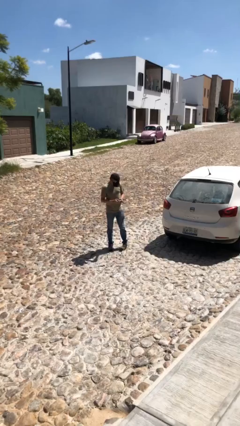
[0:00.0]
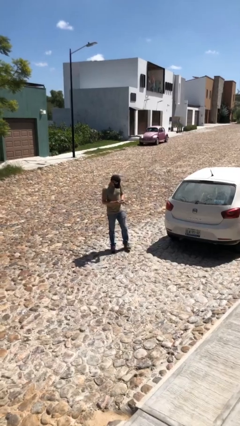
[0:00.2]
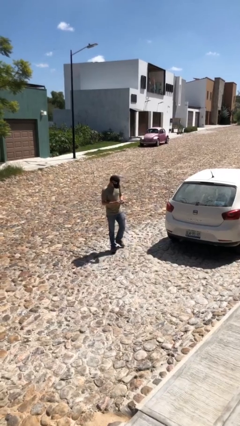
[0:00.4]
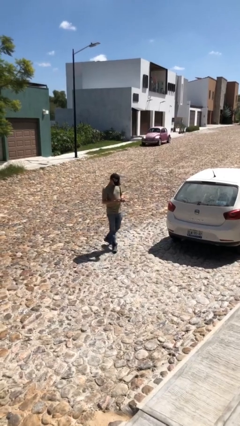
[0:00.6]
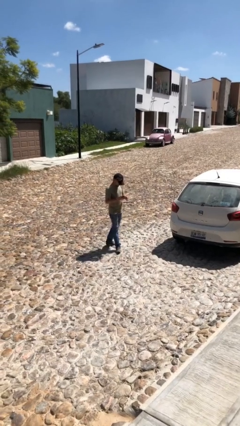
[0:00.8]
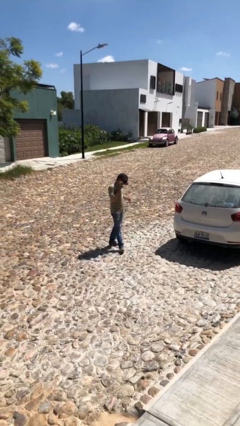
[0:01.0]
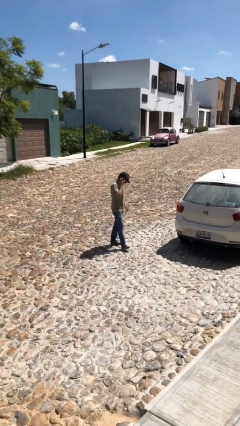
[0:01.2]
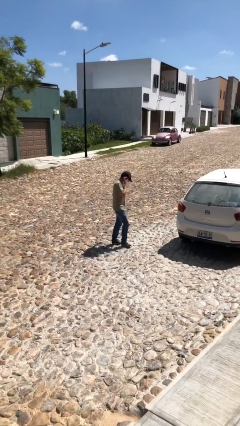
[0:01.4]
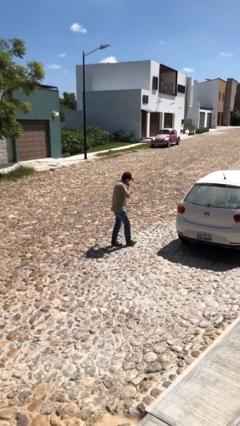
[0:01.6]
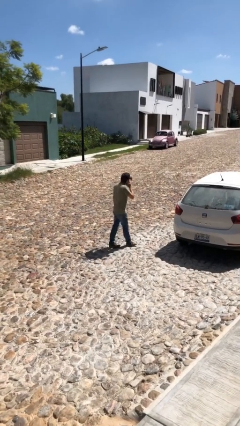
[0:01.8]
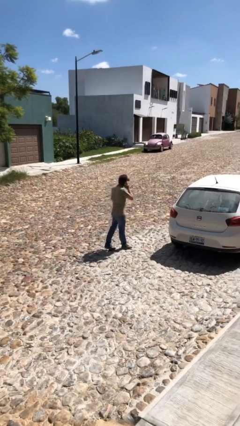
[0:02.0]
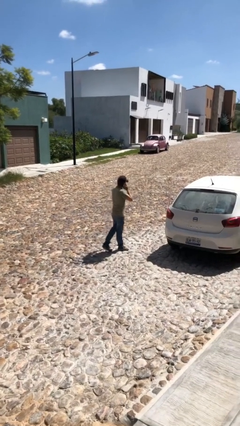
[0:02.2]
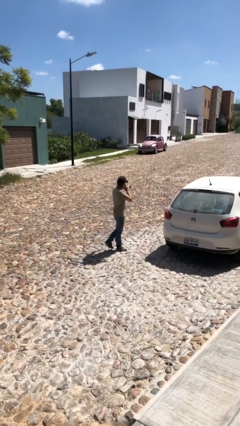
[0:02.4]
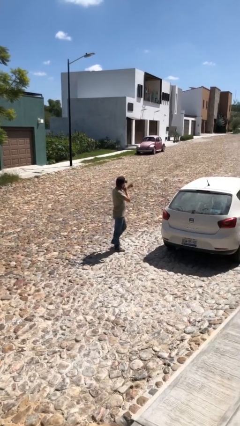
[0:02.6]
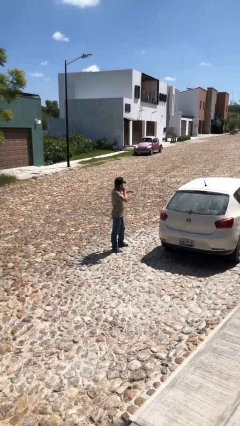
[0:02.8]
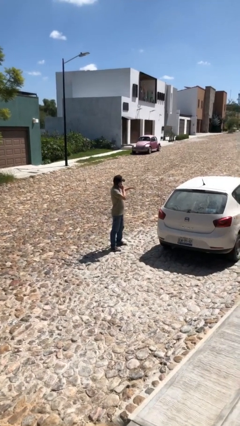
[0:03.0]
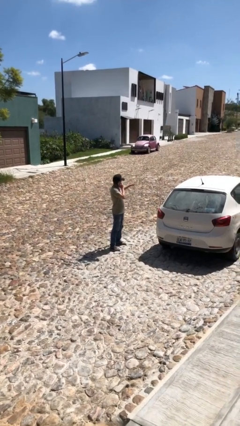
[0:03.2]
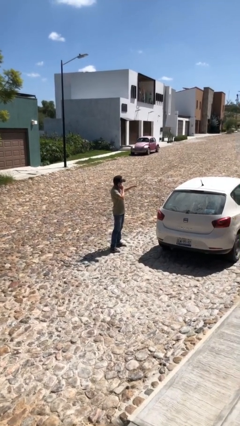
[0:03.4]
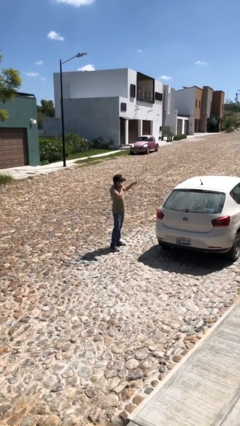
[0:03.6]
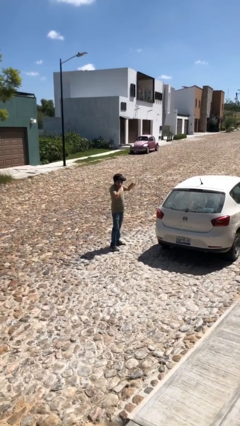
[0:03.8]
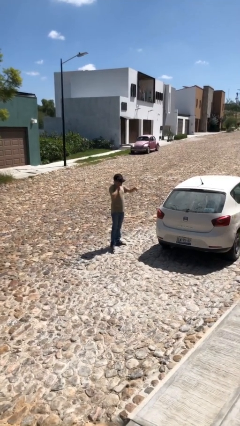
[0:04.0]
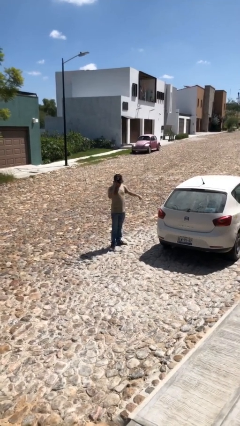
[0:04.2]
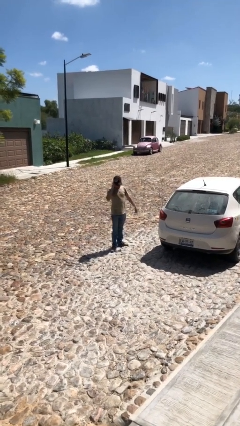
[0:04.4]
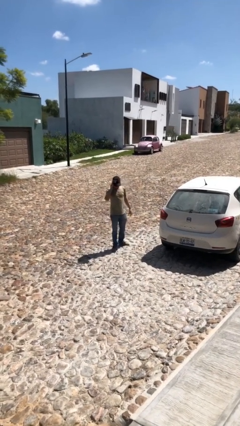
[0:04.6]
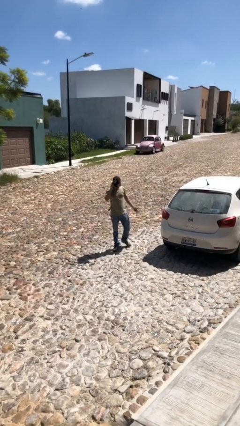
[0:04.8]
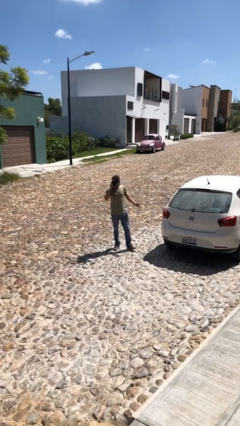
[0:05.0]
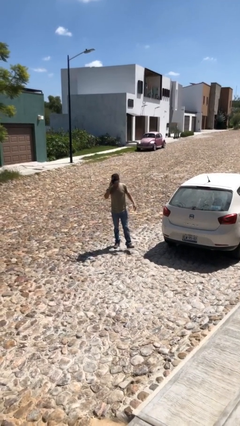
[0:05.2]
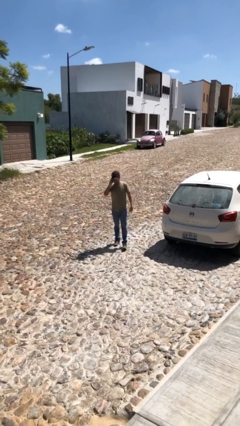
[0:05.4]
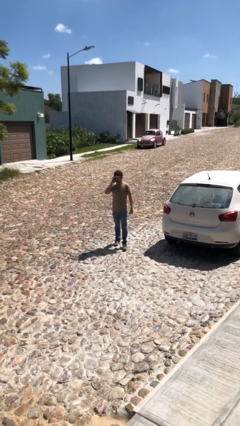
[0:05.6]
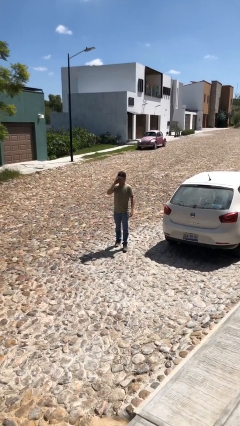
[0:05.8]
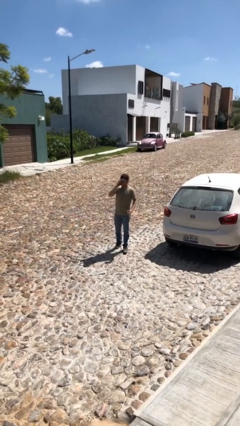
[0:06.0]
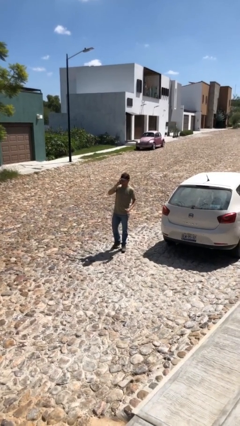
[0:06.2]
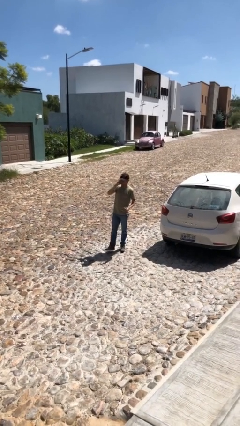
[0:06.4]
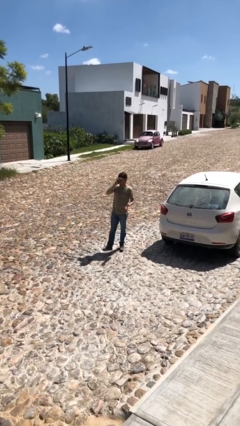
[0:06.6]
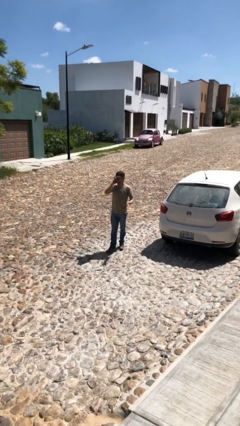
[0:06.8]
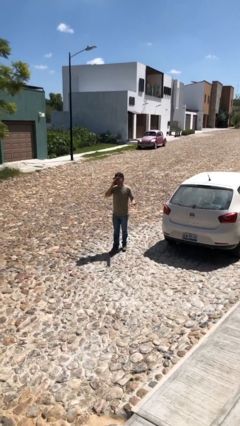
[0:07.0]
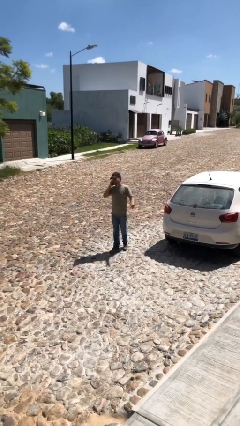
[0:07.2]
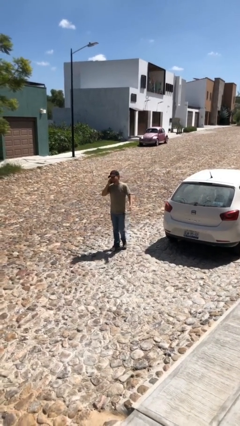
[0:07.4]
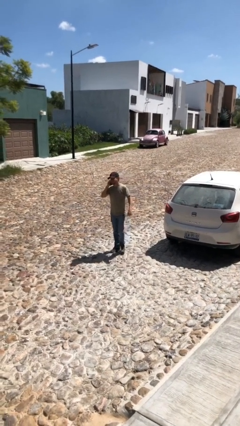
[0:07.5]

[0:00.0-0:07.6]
person talks on phone

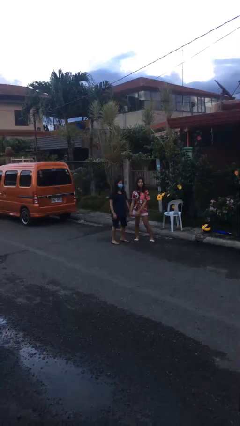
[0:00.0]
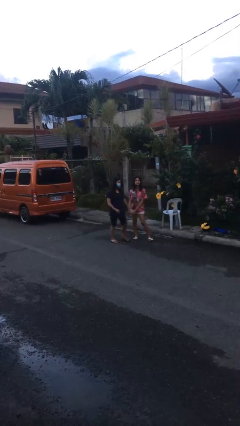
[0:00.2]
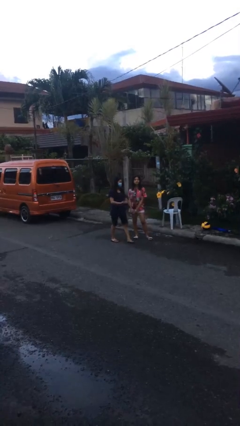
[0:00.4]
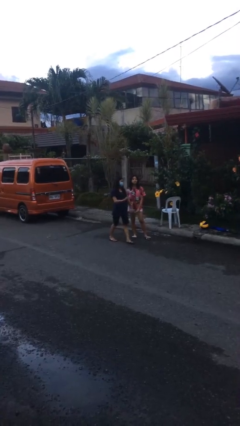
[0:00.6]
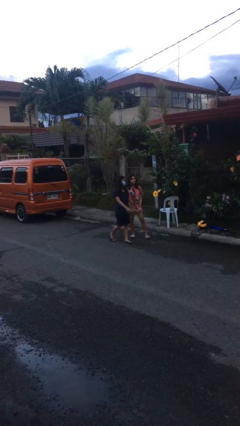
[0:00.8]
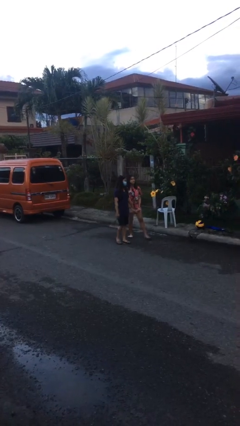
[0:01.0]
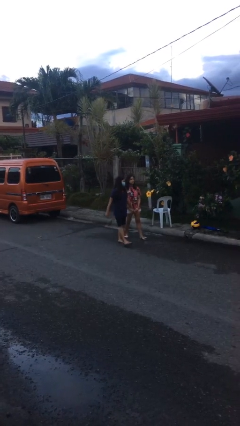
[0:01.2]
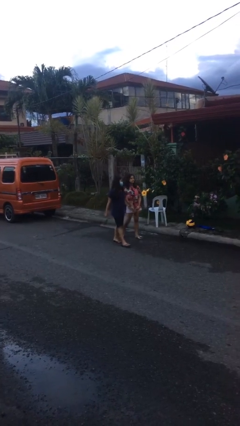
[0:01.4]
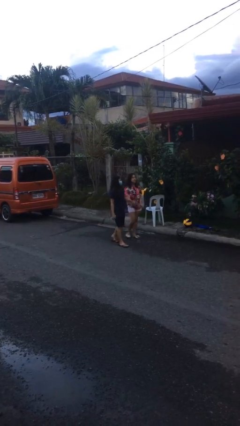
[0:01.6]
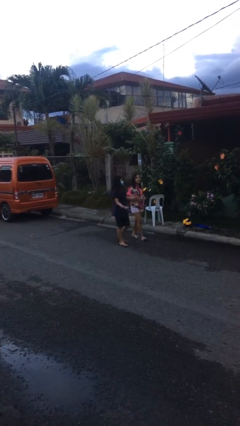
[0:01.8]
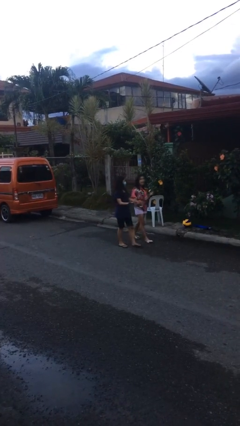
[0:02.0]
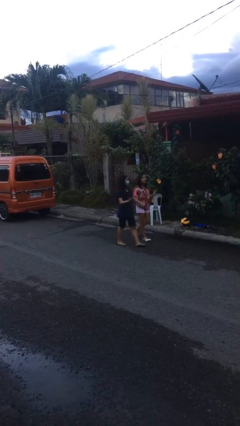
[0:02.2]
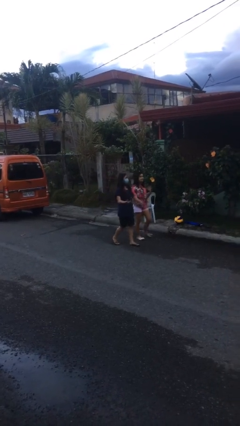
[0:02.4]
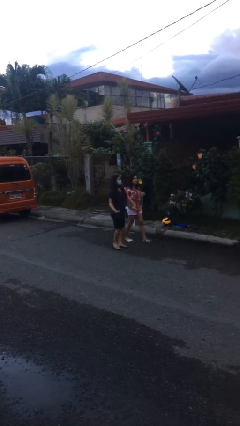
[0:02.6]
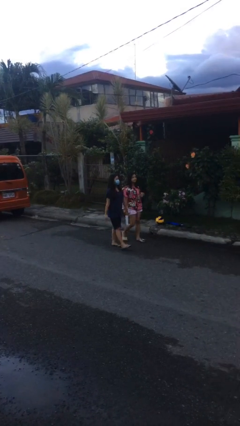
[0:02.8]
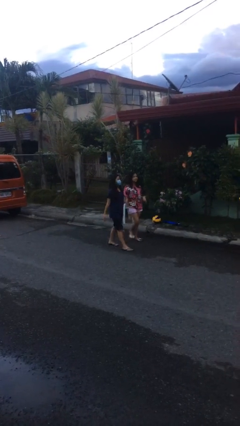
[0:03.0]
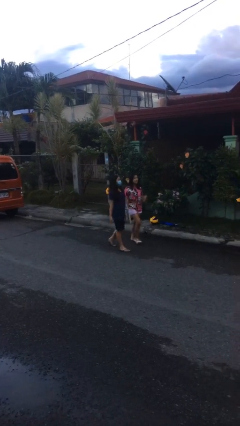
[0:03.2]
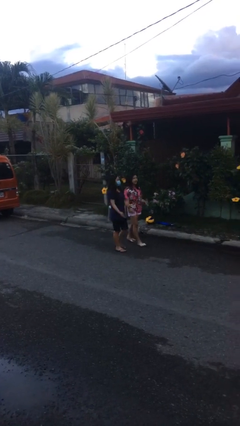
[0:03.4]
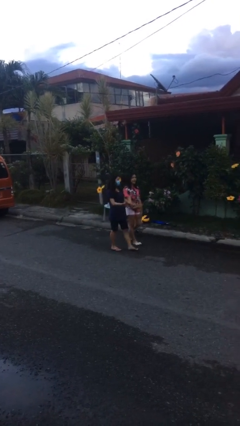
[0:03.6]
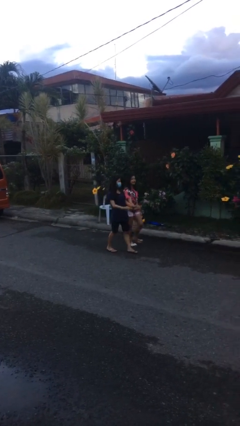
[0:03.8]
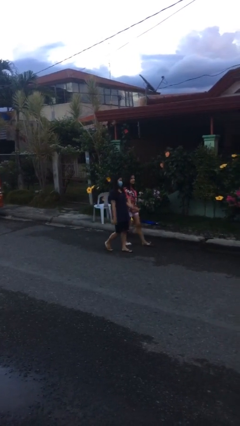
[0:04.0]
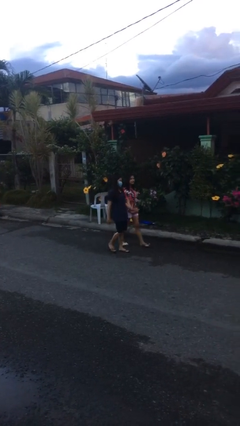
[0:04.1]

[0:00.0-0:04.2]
person holds hand

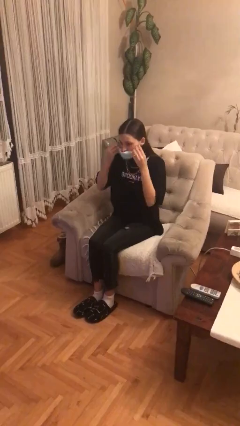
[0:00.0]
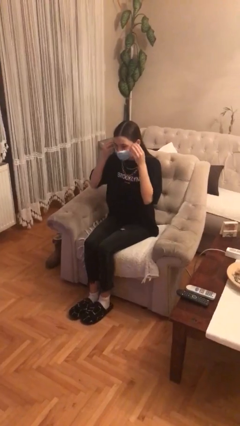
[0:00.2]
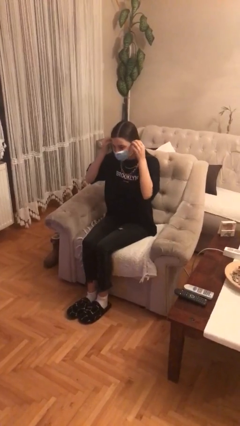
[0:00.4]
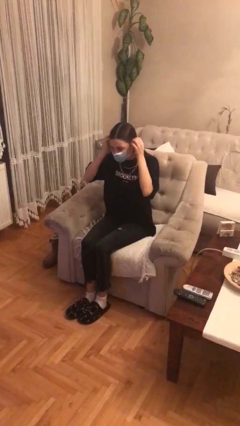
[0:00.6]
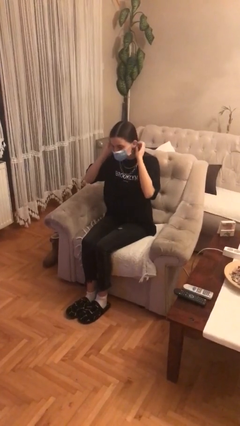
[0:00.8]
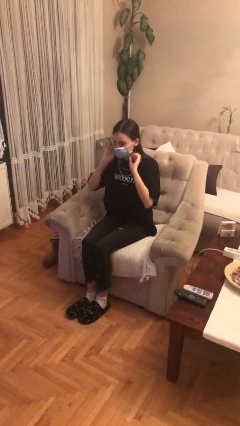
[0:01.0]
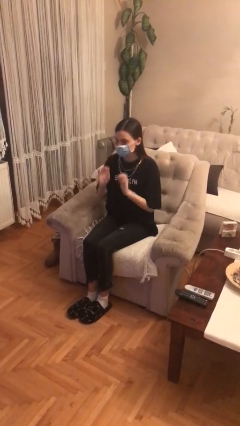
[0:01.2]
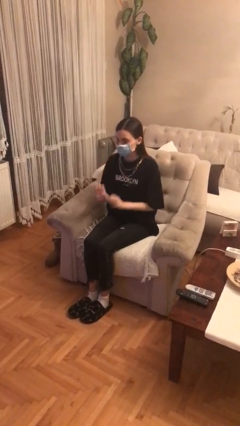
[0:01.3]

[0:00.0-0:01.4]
person puts on facemask

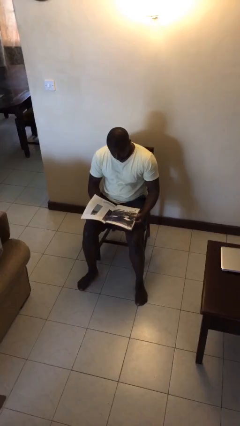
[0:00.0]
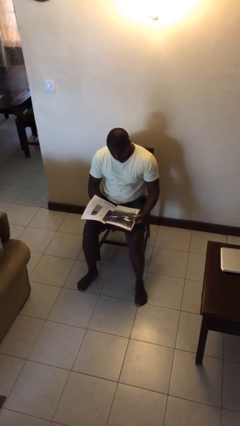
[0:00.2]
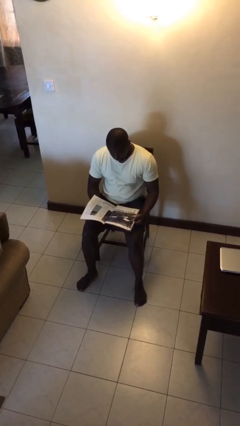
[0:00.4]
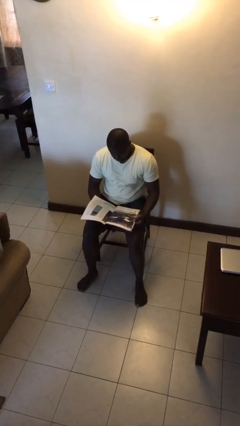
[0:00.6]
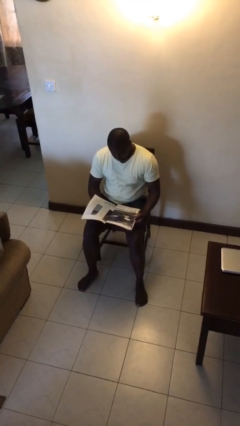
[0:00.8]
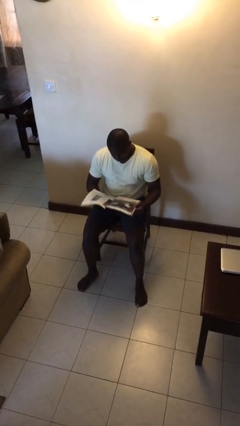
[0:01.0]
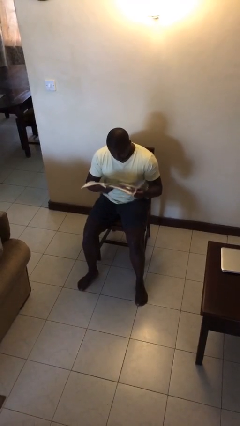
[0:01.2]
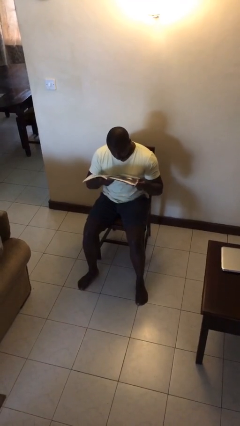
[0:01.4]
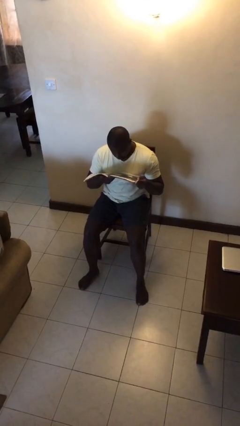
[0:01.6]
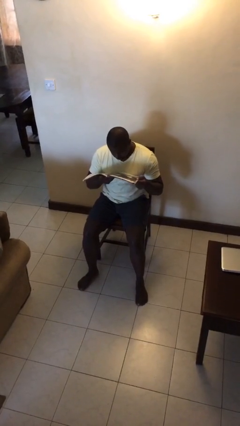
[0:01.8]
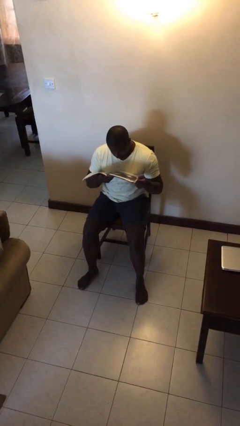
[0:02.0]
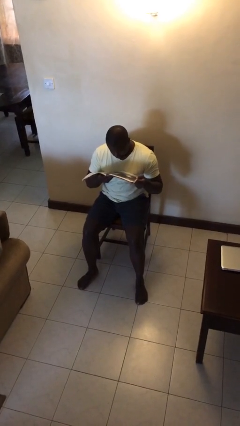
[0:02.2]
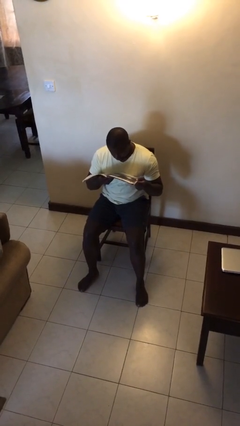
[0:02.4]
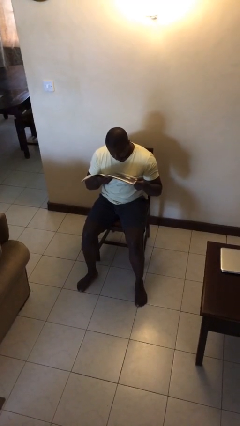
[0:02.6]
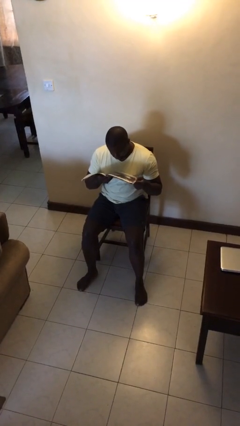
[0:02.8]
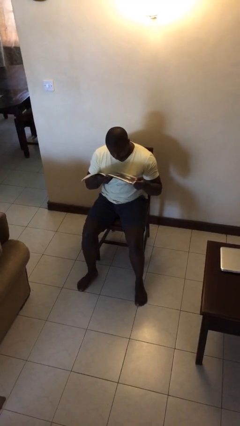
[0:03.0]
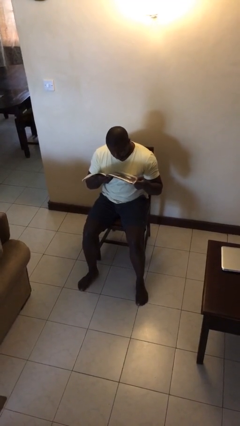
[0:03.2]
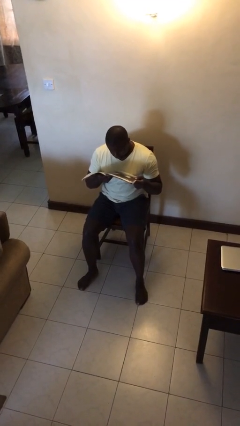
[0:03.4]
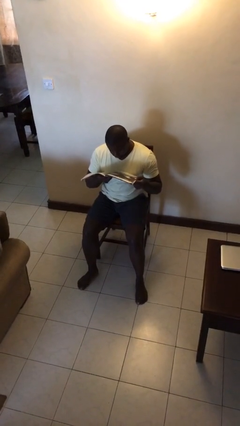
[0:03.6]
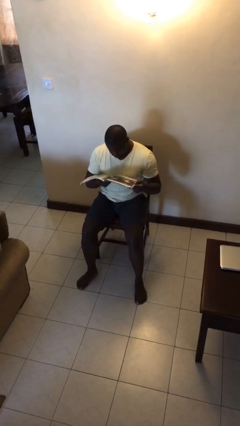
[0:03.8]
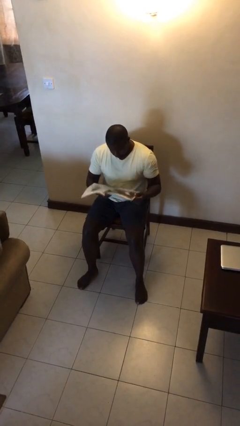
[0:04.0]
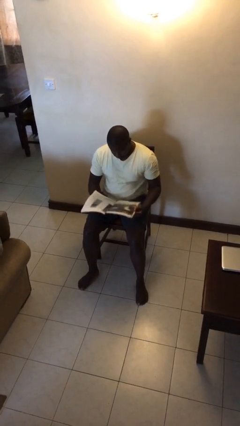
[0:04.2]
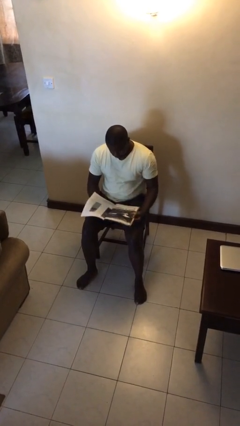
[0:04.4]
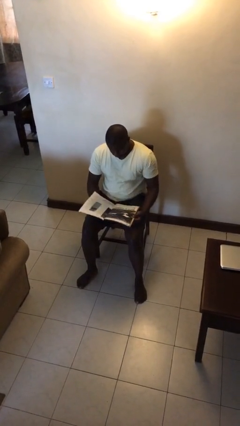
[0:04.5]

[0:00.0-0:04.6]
person reads document
